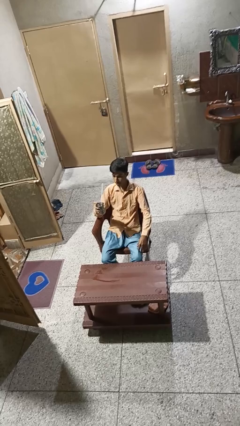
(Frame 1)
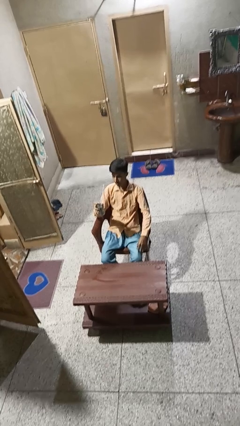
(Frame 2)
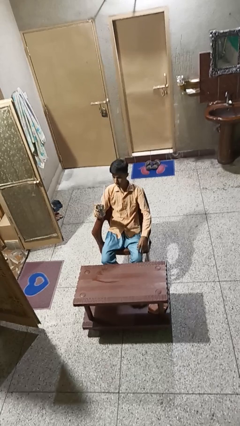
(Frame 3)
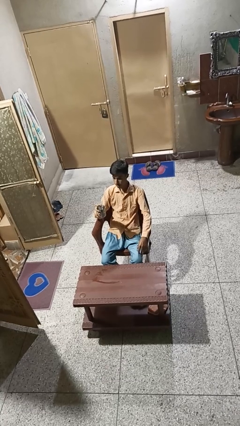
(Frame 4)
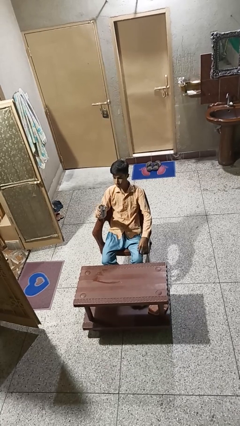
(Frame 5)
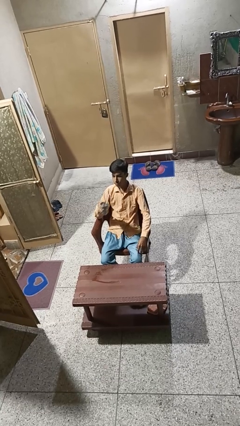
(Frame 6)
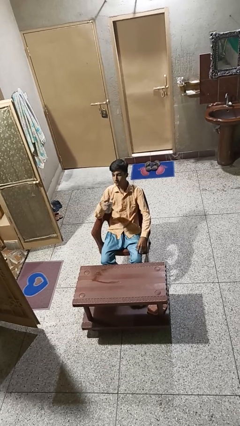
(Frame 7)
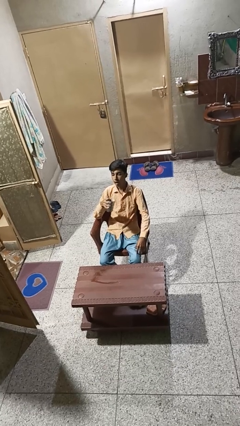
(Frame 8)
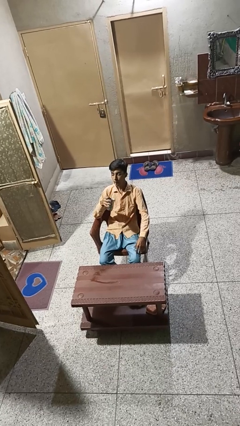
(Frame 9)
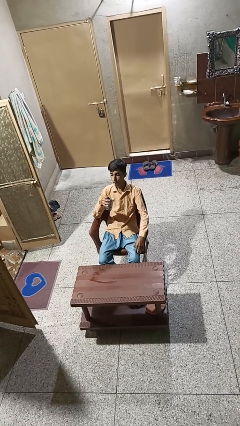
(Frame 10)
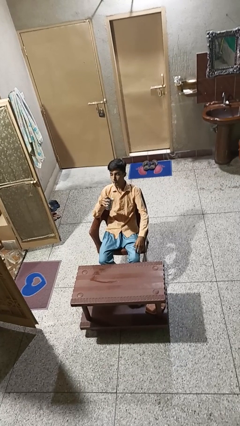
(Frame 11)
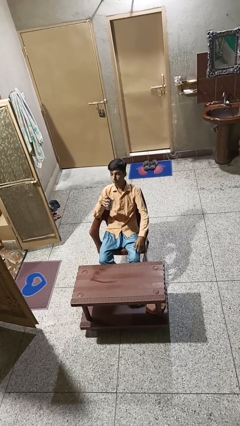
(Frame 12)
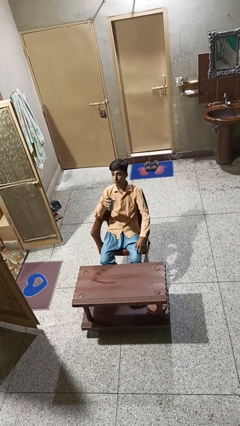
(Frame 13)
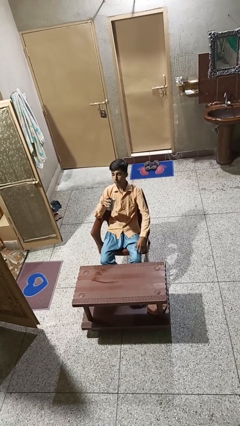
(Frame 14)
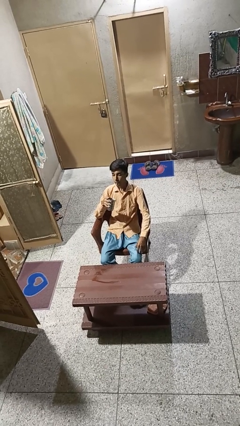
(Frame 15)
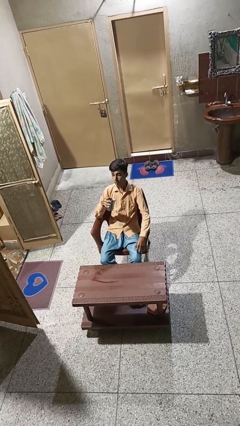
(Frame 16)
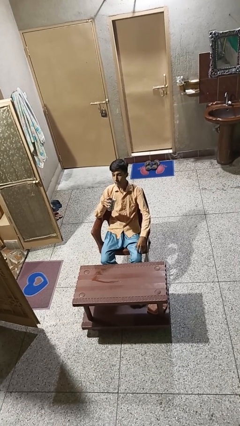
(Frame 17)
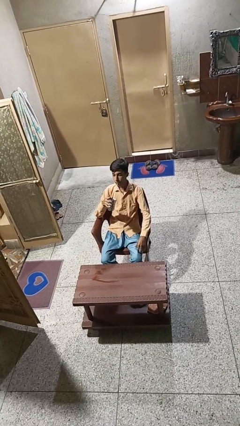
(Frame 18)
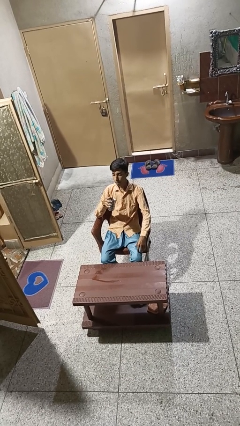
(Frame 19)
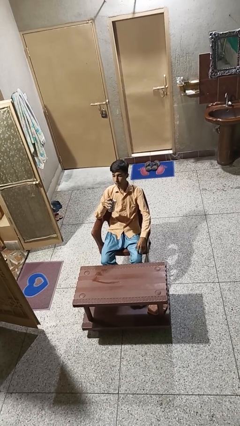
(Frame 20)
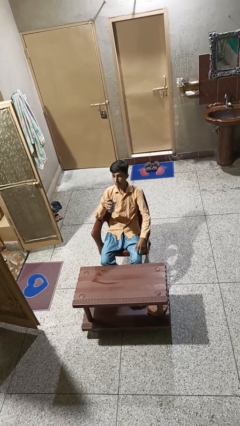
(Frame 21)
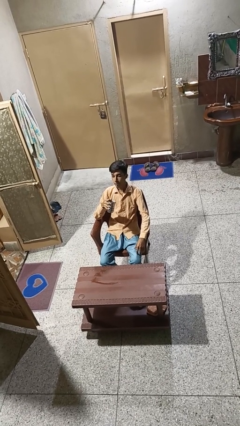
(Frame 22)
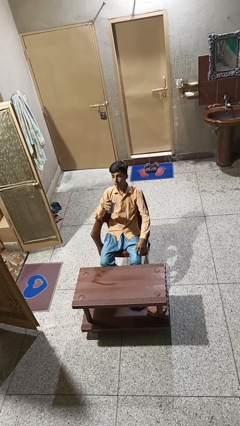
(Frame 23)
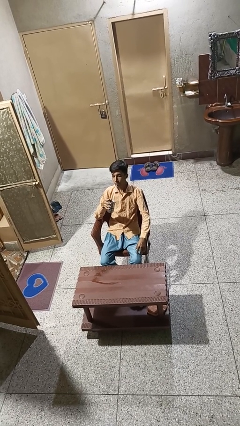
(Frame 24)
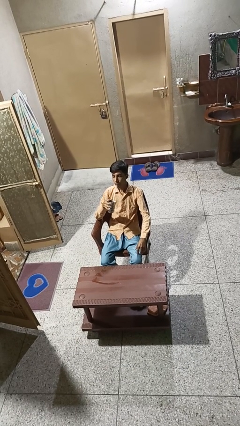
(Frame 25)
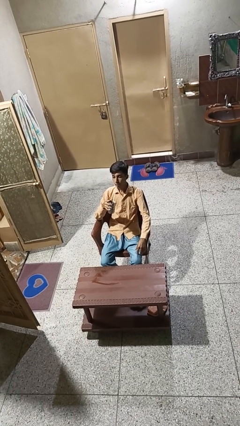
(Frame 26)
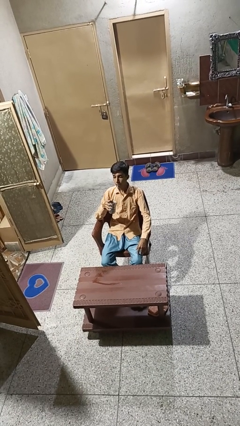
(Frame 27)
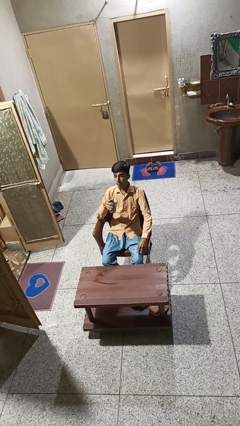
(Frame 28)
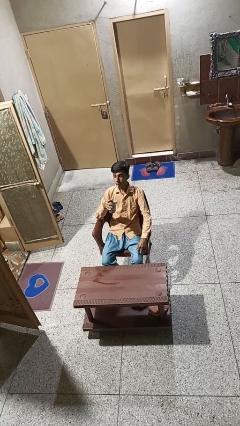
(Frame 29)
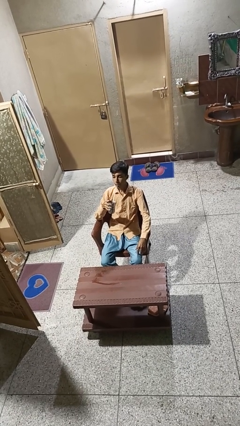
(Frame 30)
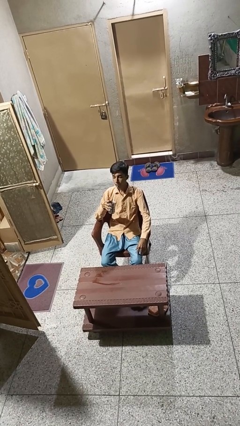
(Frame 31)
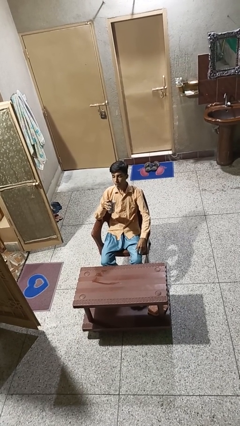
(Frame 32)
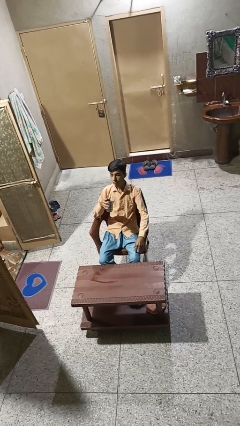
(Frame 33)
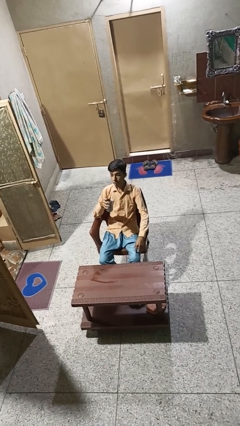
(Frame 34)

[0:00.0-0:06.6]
person drinks from straw

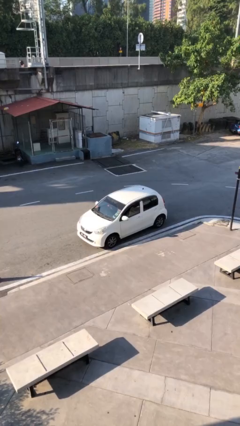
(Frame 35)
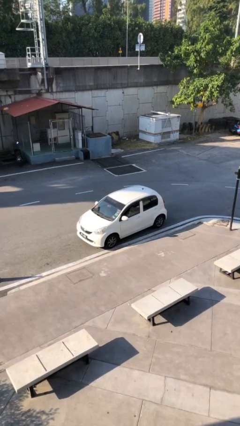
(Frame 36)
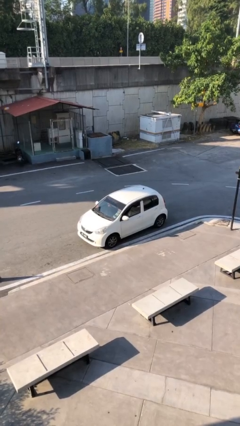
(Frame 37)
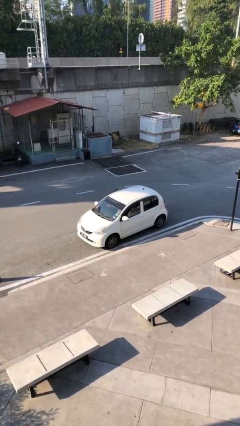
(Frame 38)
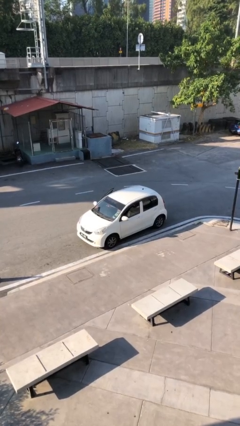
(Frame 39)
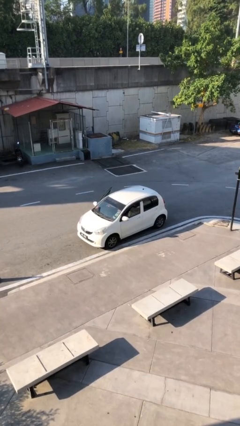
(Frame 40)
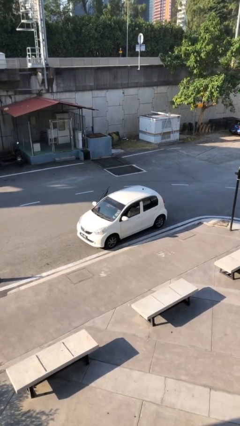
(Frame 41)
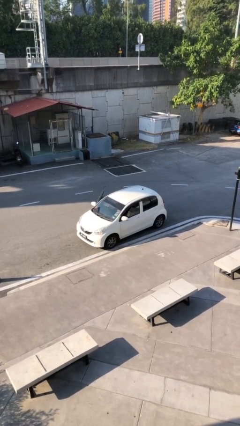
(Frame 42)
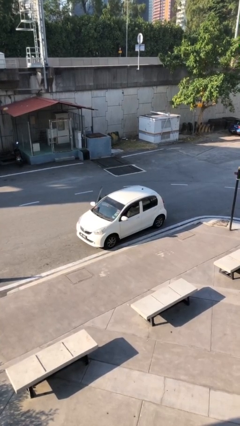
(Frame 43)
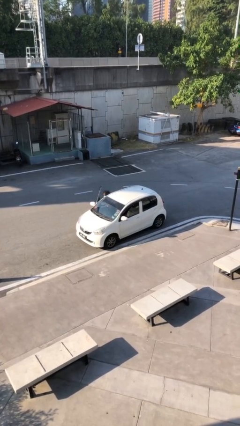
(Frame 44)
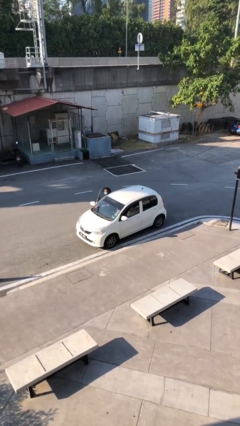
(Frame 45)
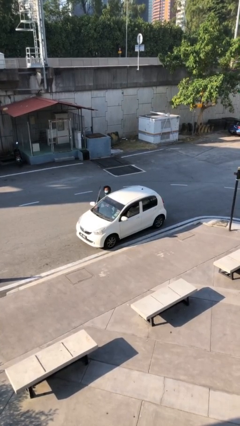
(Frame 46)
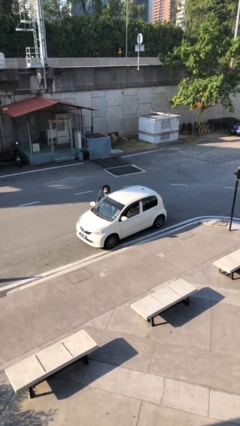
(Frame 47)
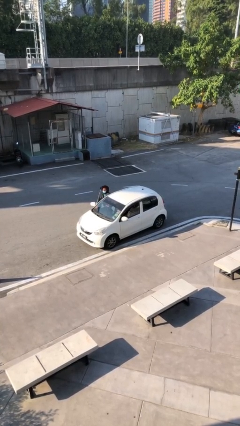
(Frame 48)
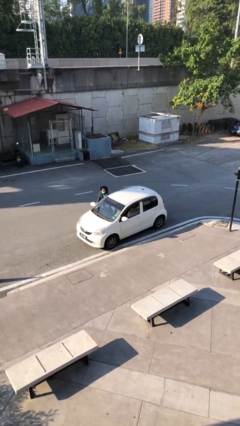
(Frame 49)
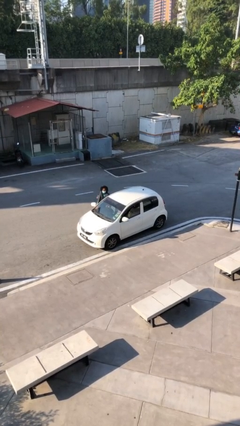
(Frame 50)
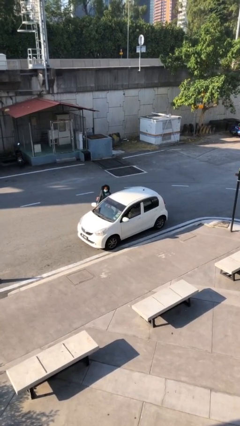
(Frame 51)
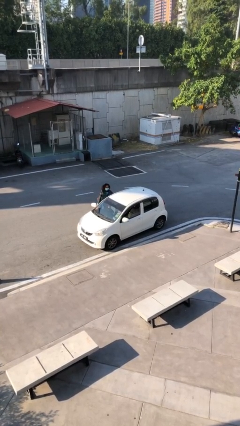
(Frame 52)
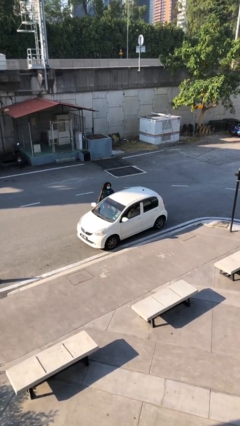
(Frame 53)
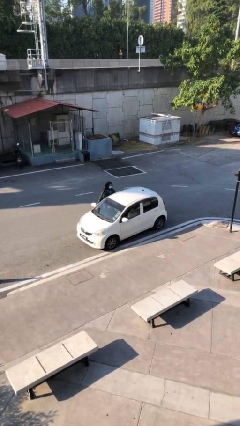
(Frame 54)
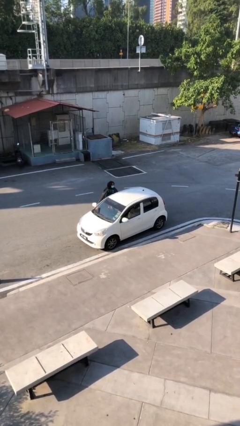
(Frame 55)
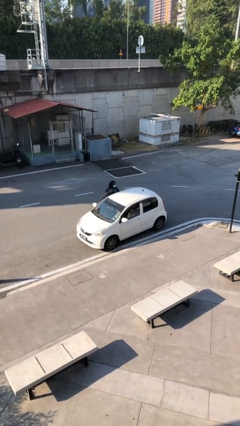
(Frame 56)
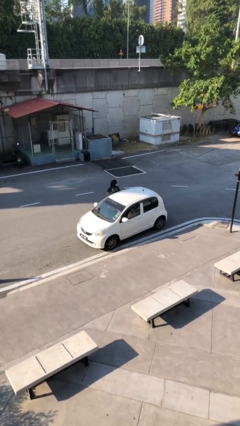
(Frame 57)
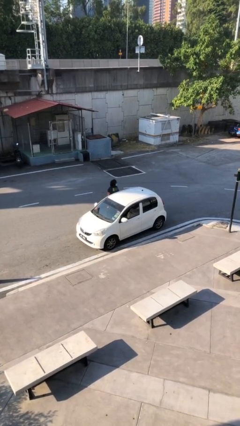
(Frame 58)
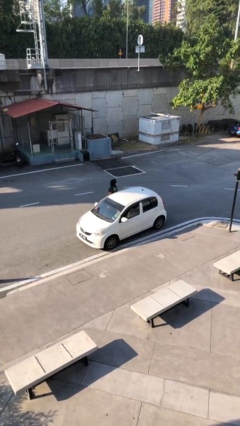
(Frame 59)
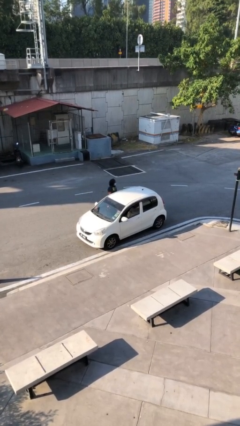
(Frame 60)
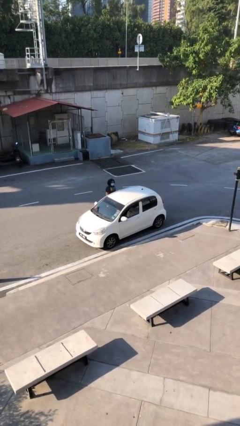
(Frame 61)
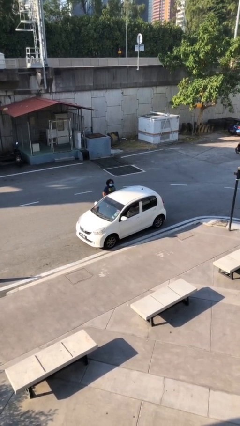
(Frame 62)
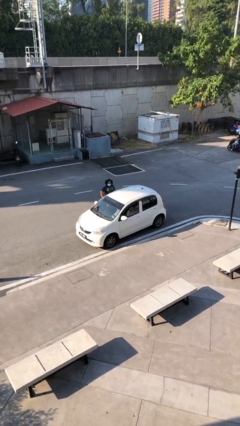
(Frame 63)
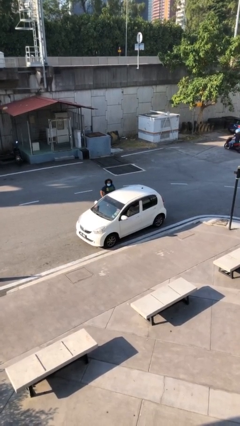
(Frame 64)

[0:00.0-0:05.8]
car drops off person

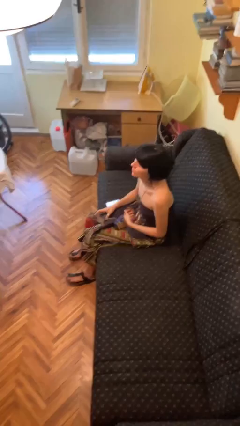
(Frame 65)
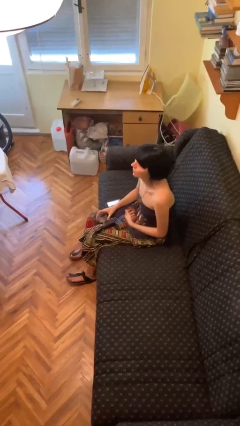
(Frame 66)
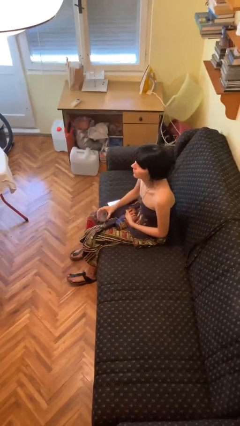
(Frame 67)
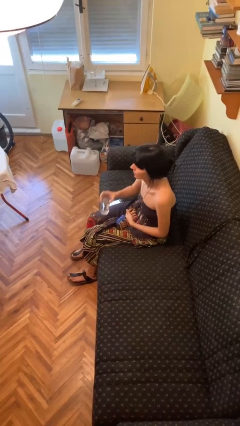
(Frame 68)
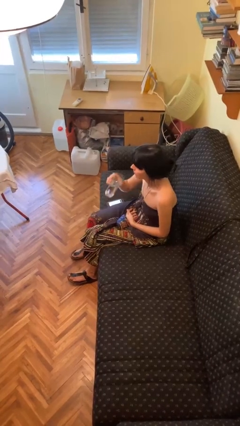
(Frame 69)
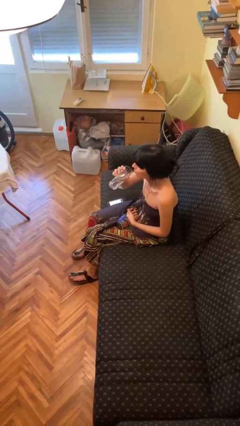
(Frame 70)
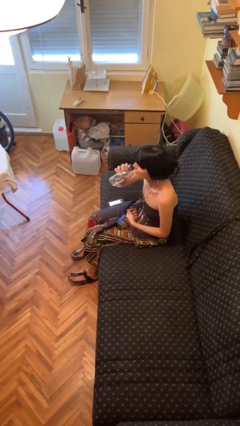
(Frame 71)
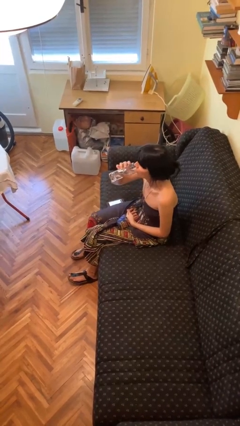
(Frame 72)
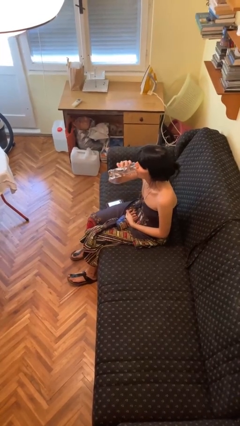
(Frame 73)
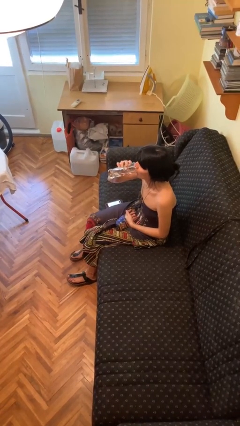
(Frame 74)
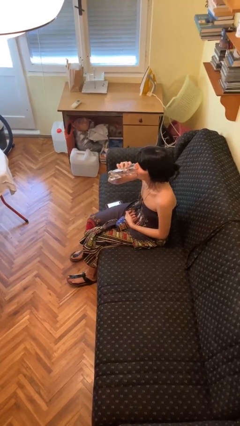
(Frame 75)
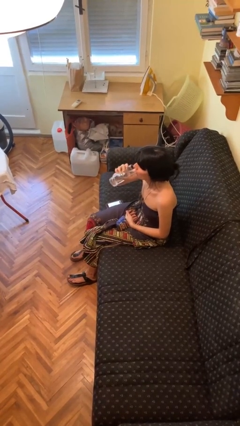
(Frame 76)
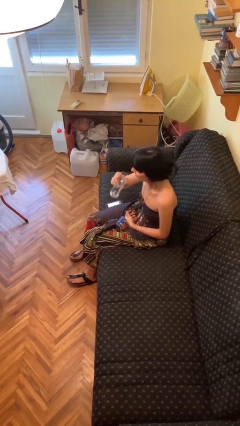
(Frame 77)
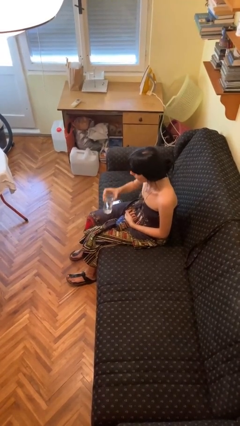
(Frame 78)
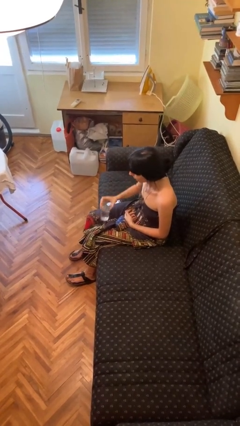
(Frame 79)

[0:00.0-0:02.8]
person drinks from cup

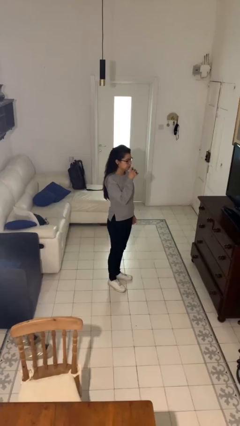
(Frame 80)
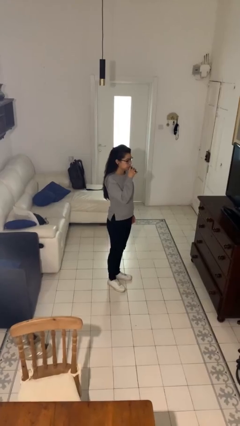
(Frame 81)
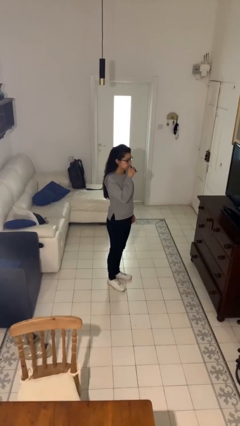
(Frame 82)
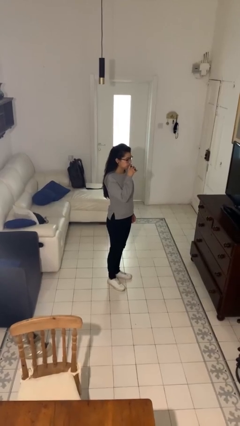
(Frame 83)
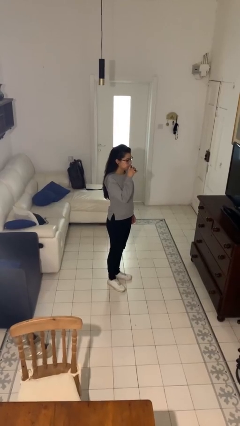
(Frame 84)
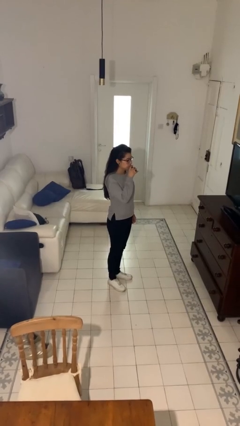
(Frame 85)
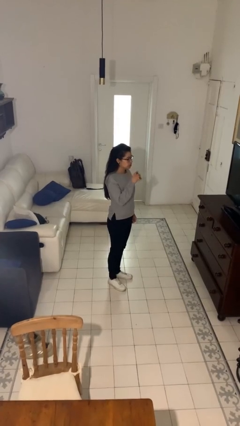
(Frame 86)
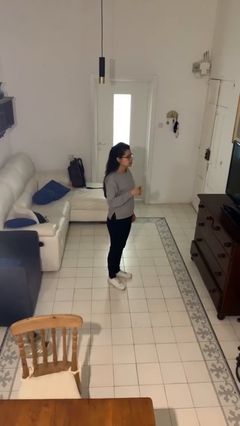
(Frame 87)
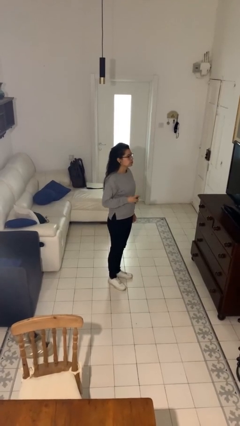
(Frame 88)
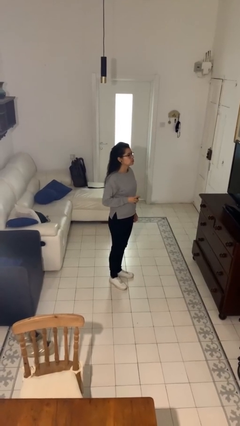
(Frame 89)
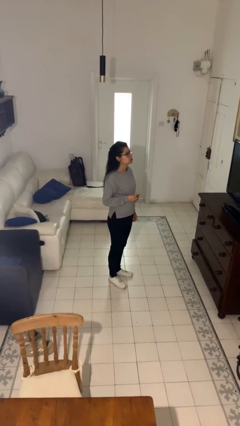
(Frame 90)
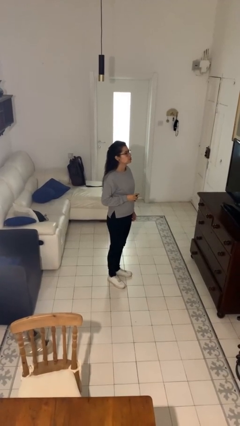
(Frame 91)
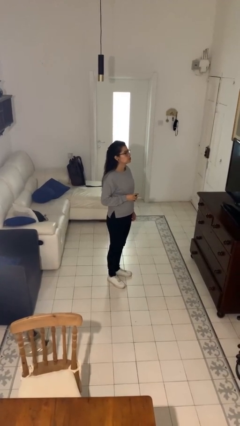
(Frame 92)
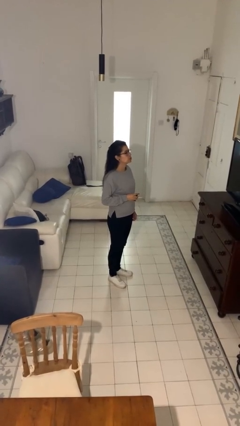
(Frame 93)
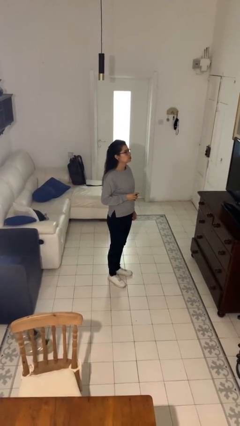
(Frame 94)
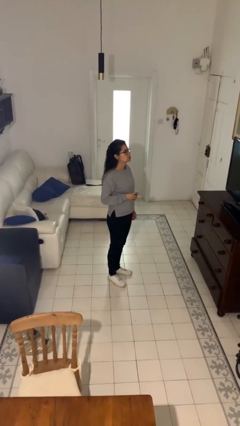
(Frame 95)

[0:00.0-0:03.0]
person vapes
